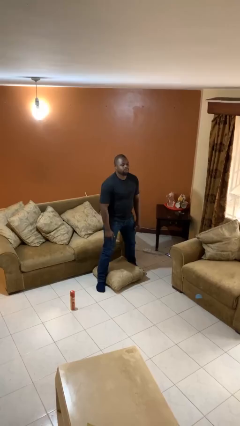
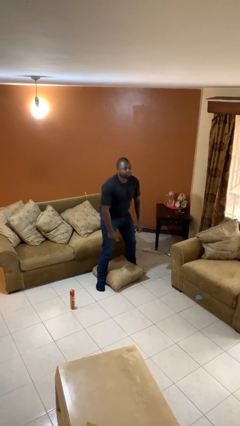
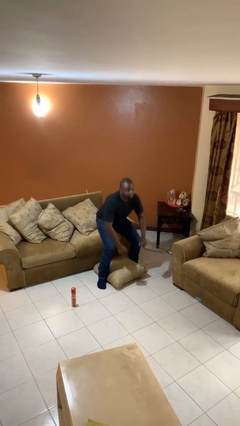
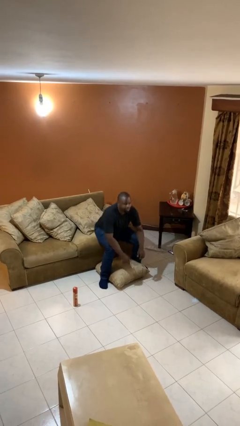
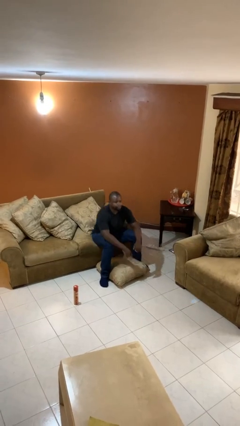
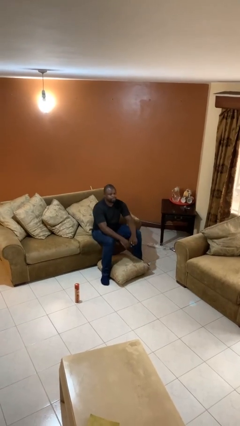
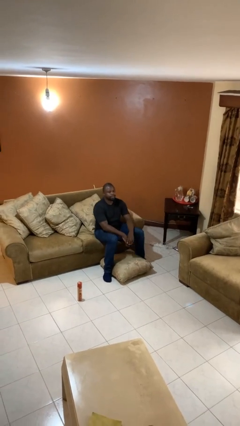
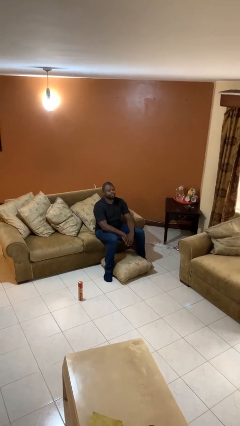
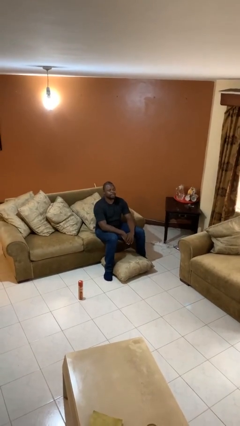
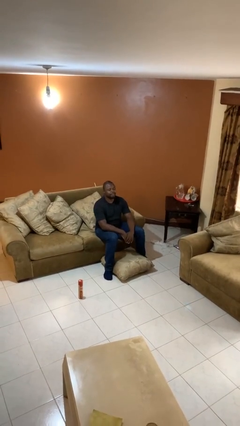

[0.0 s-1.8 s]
person sits down

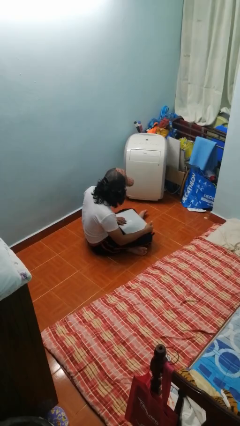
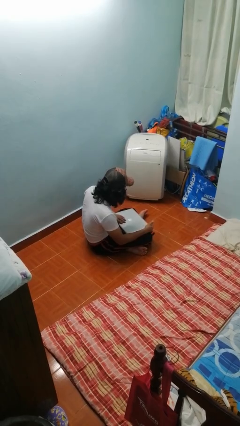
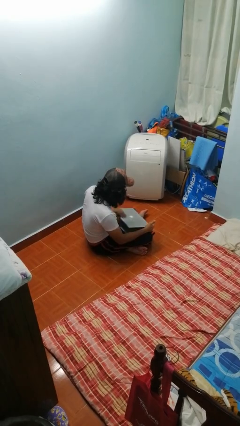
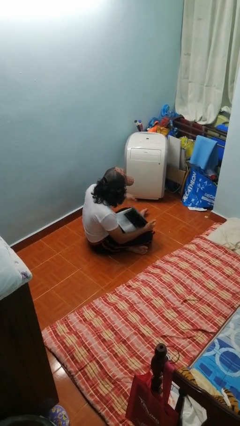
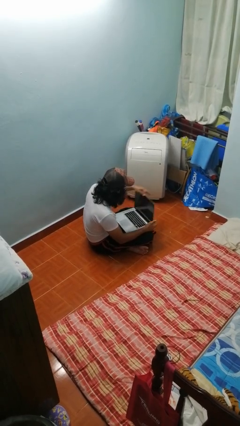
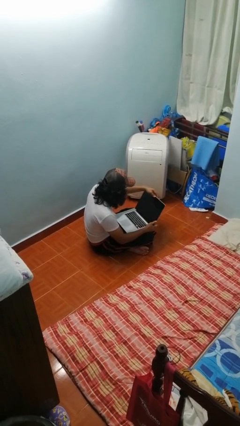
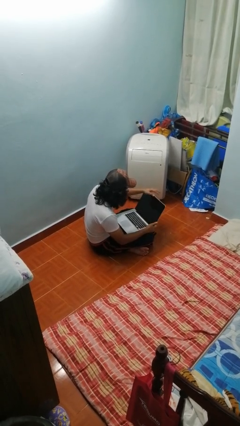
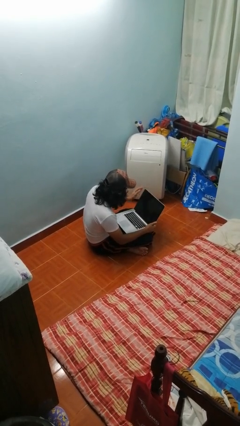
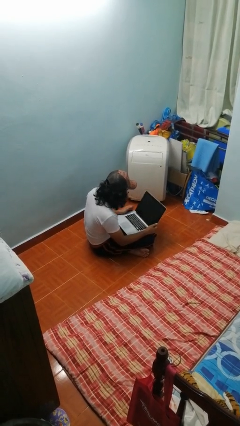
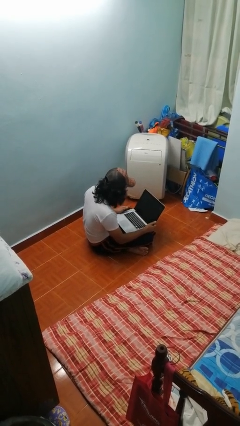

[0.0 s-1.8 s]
person opens laptop

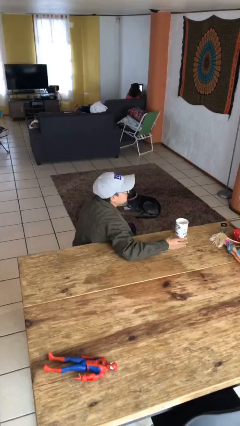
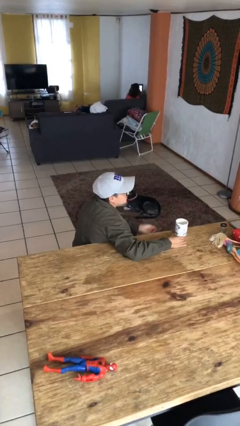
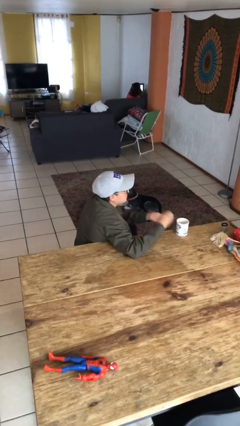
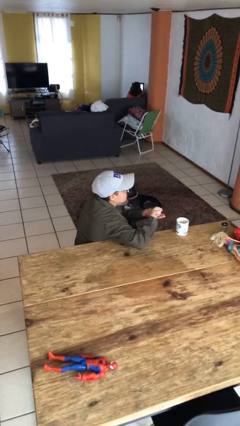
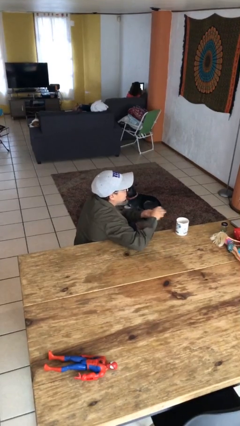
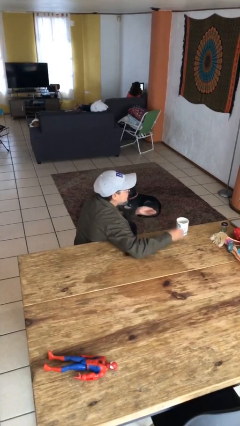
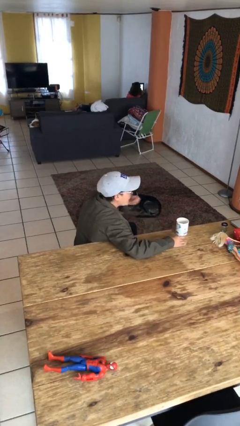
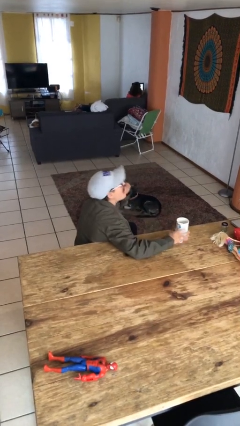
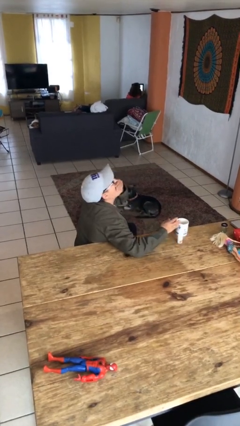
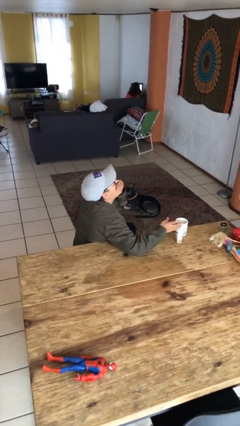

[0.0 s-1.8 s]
person takes medicine pills

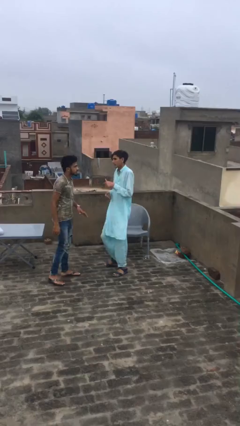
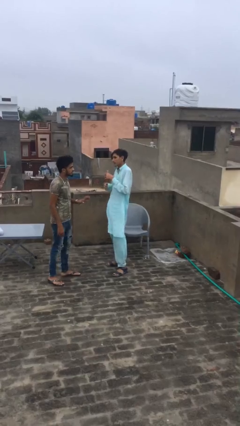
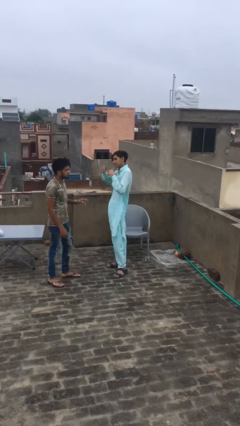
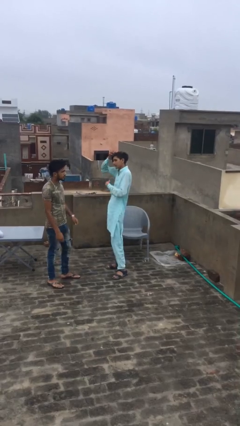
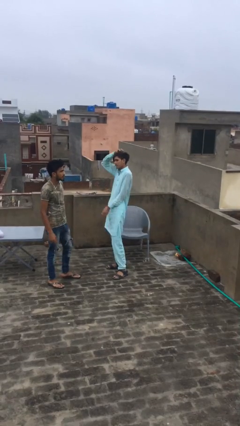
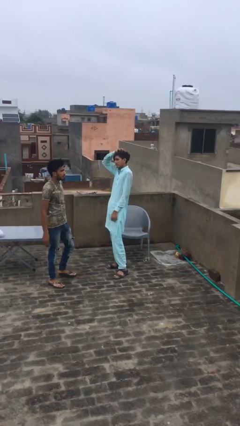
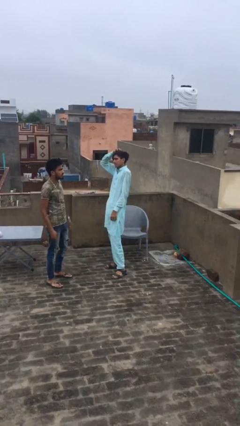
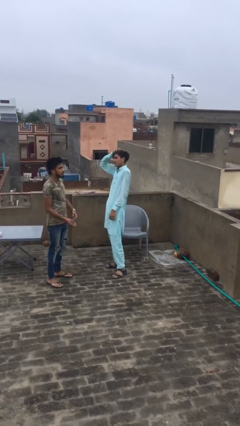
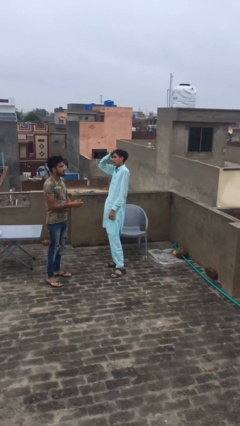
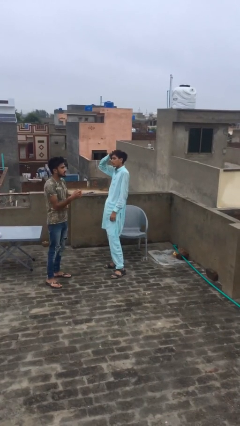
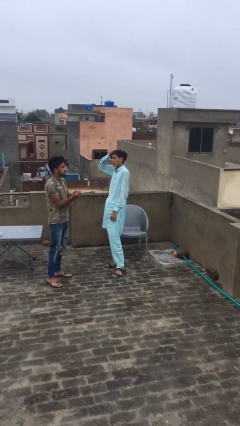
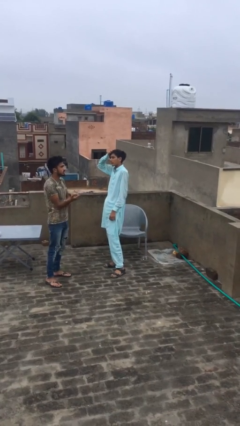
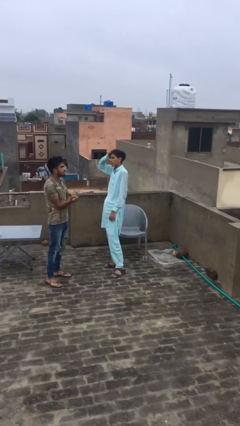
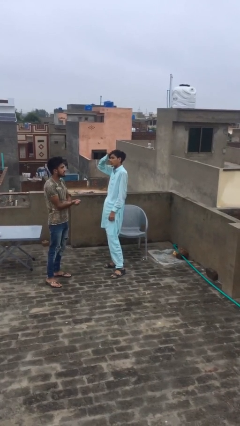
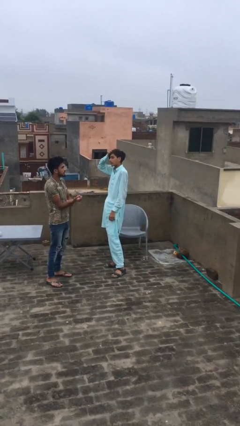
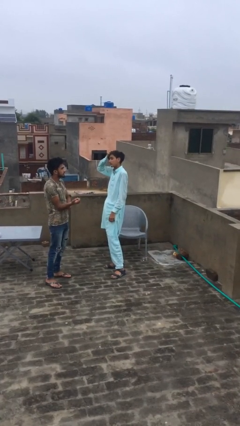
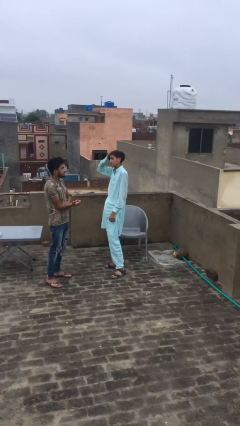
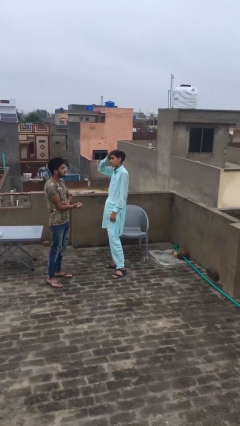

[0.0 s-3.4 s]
person talks to person

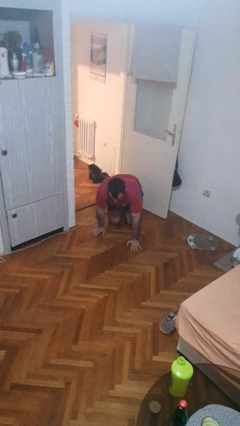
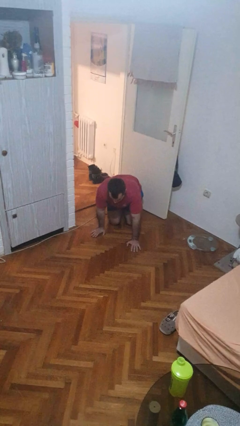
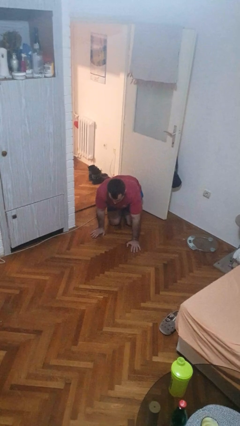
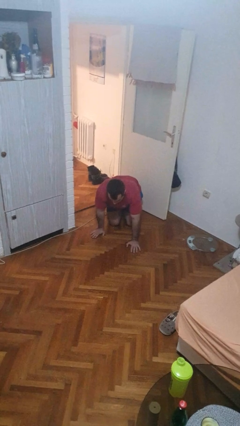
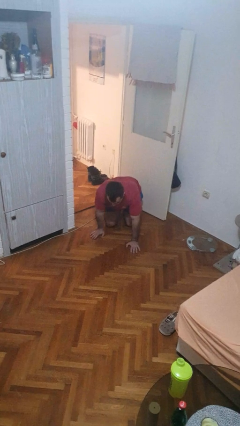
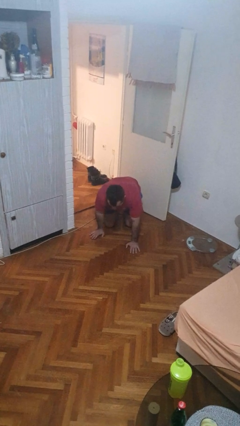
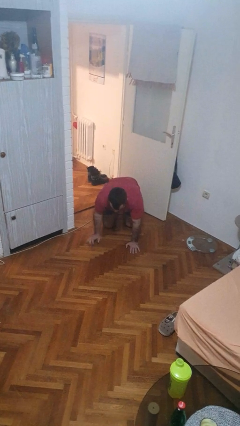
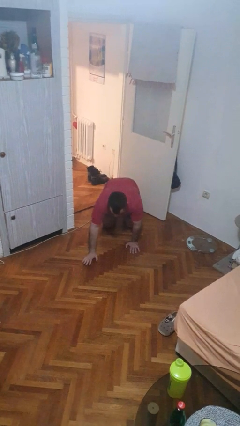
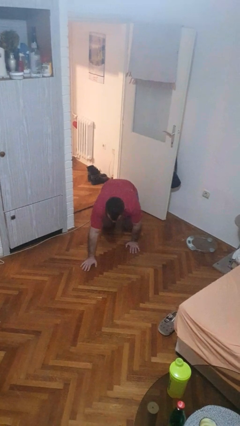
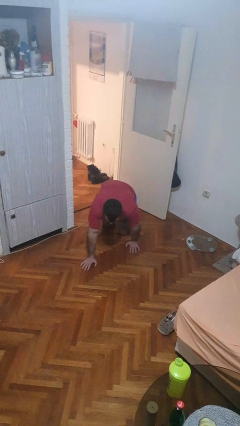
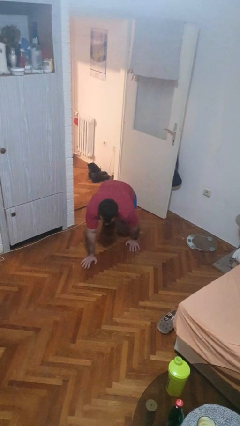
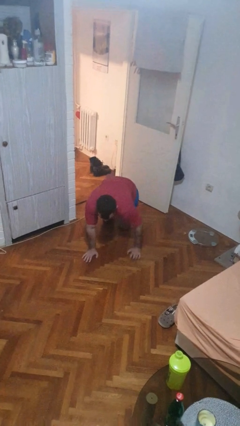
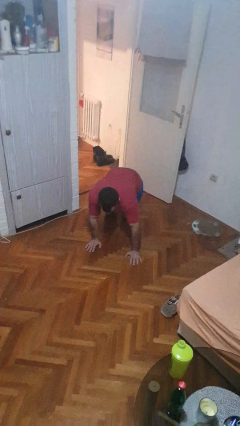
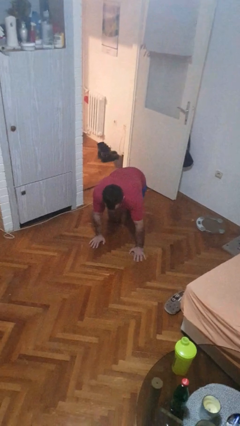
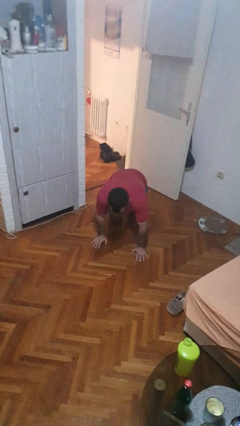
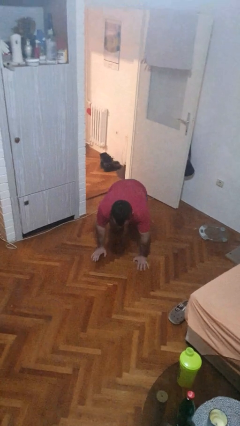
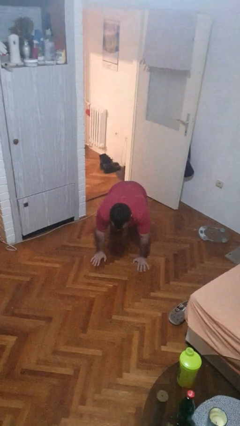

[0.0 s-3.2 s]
person crawls

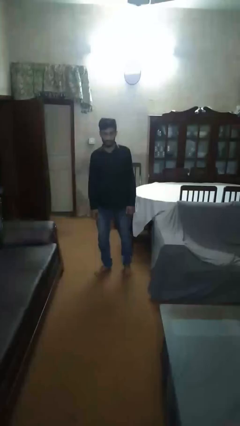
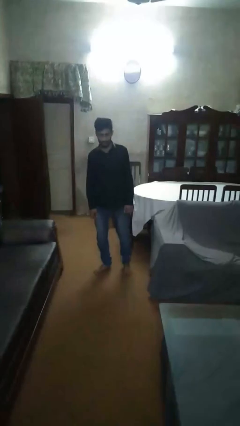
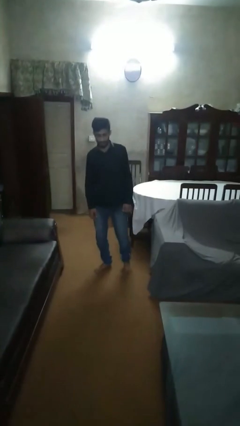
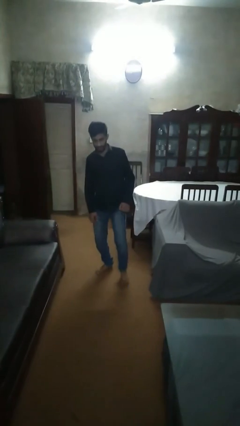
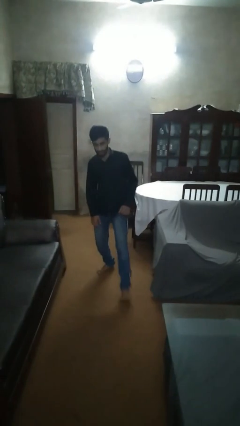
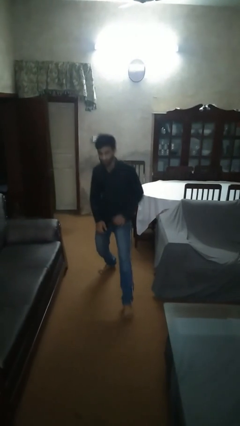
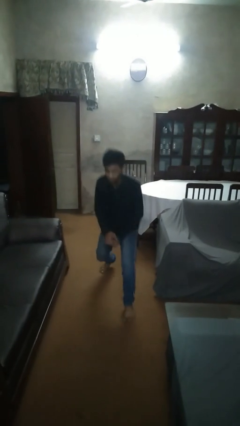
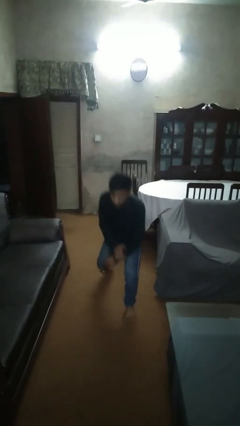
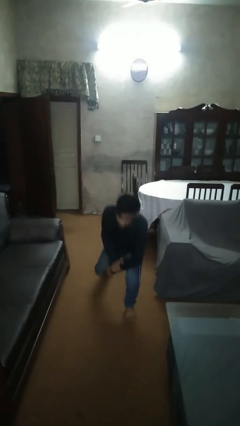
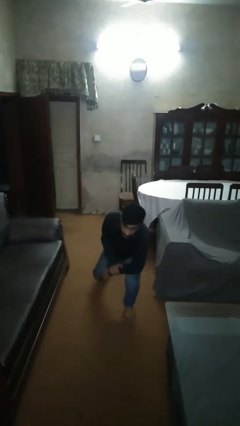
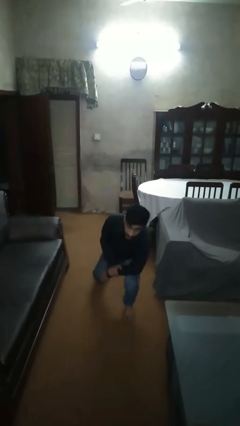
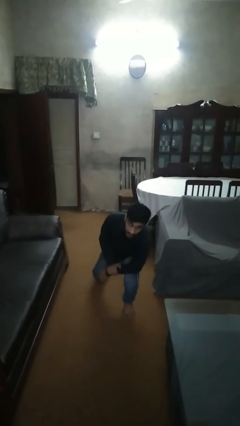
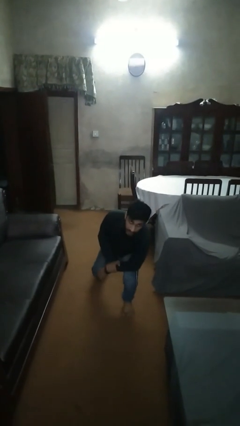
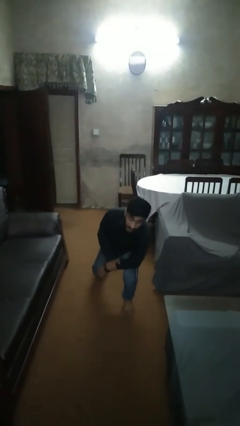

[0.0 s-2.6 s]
person exercises with lunges

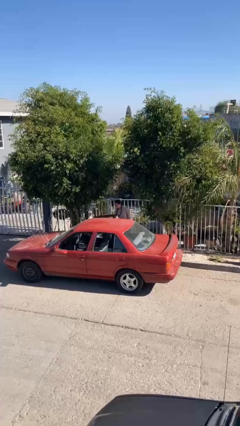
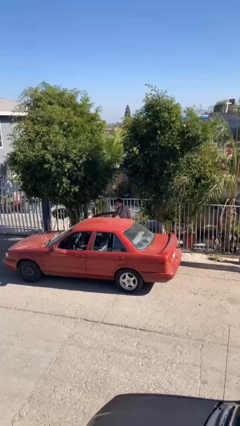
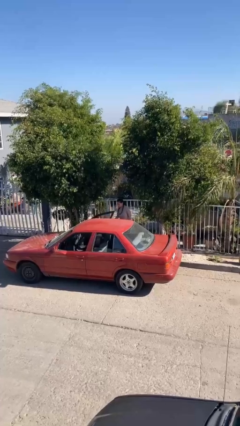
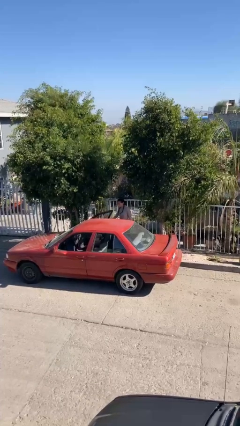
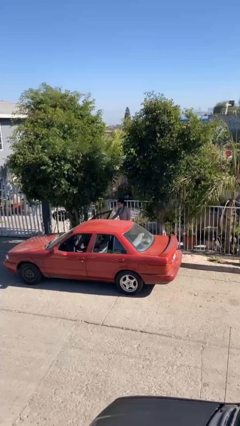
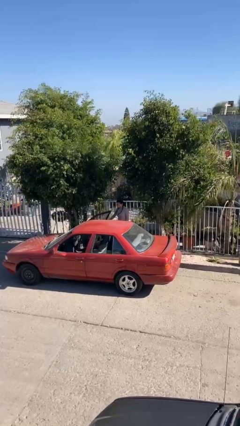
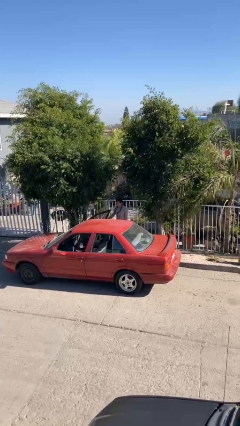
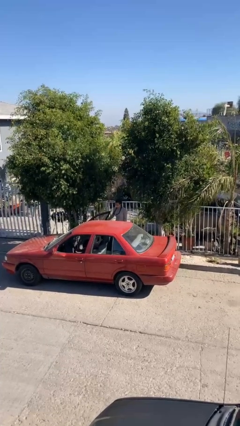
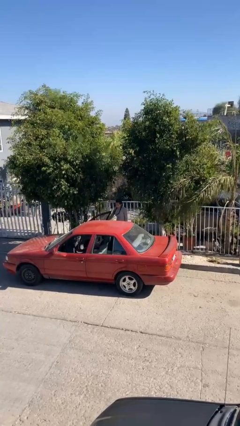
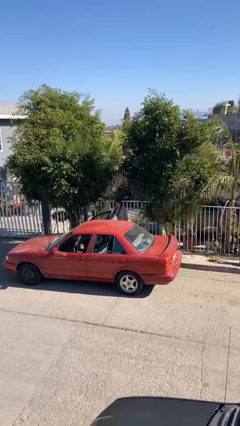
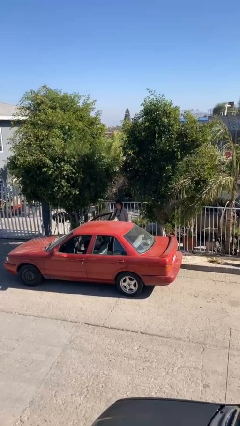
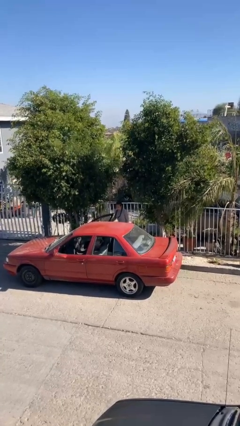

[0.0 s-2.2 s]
person opens car door

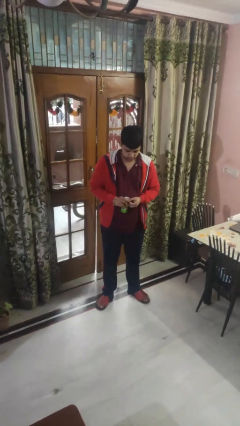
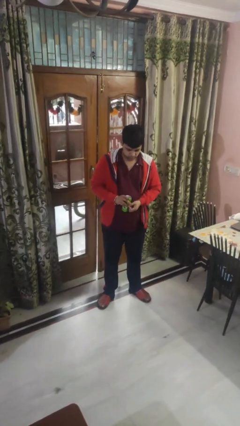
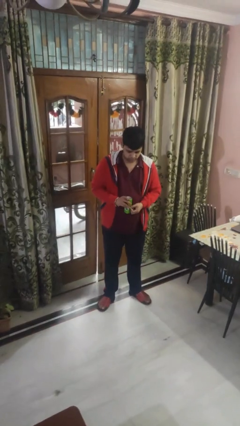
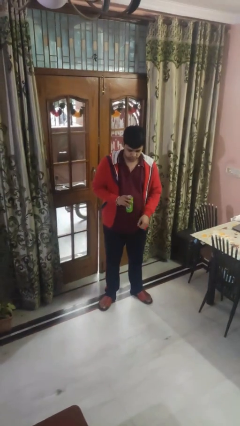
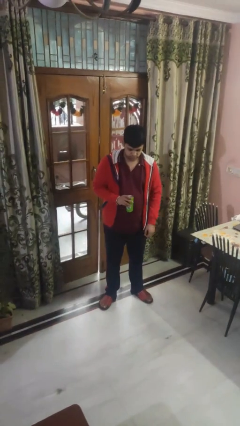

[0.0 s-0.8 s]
person opens beverage can
